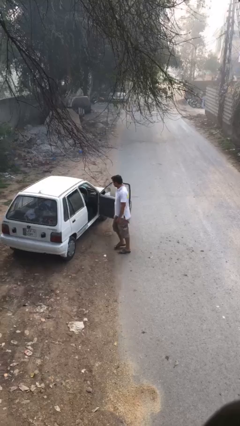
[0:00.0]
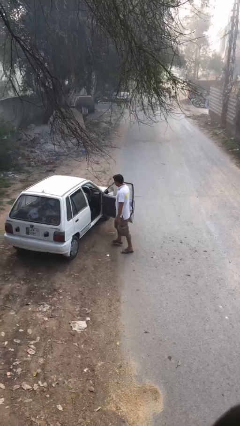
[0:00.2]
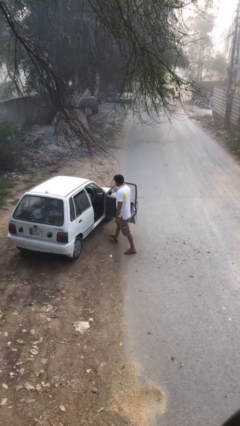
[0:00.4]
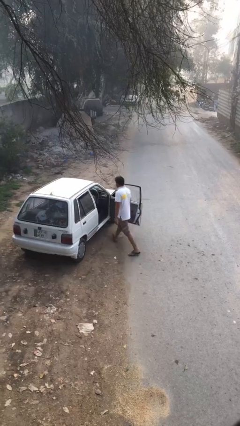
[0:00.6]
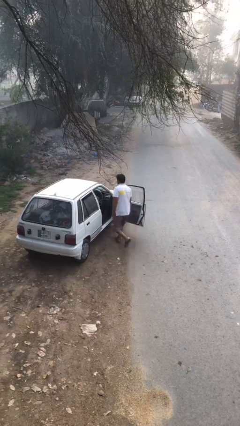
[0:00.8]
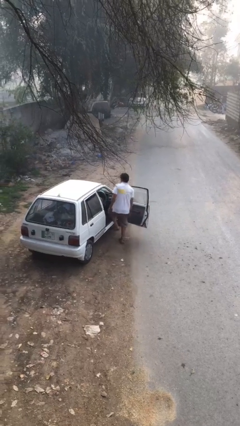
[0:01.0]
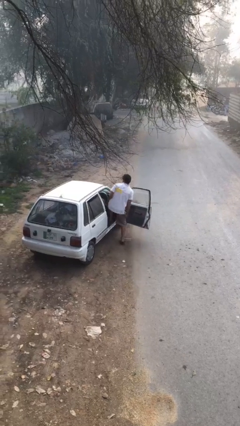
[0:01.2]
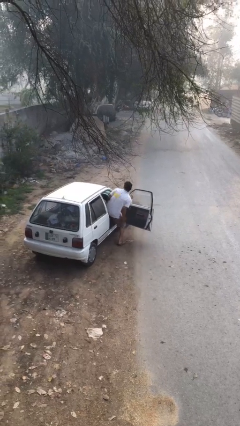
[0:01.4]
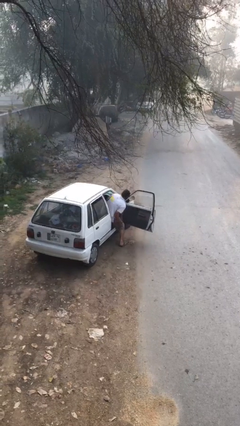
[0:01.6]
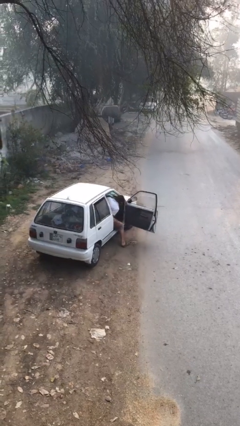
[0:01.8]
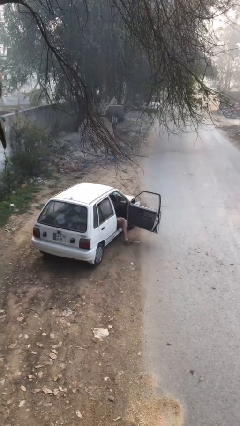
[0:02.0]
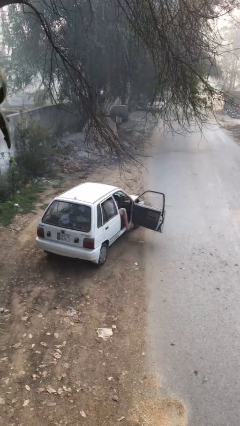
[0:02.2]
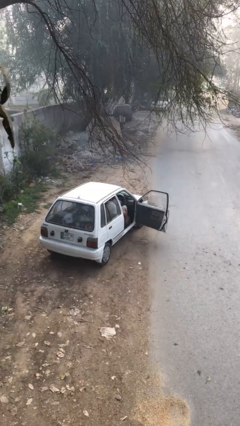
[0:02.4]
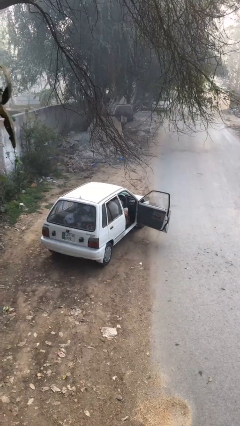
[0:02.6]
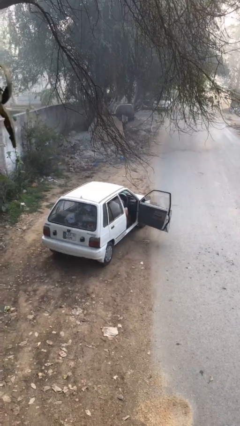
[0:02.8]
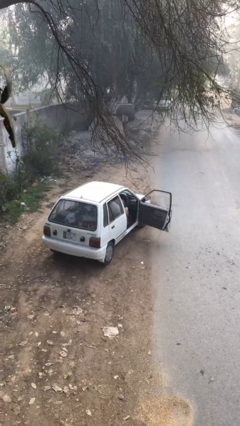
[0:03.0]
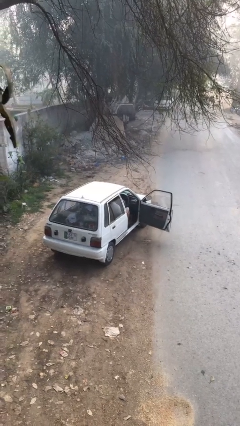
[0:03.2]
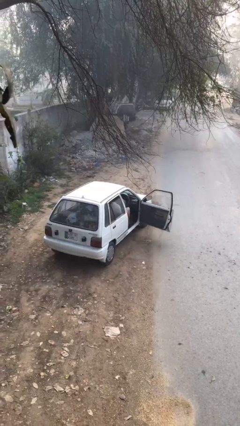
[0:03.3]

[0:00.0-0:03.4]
person enters car

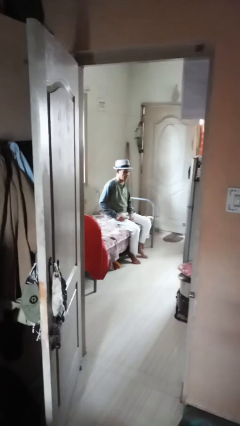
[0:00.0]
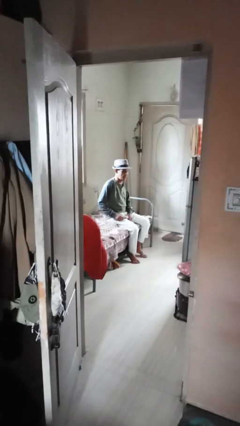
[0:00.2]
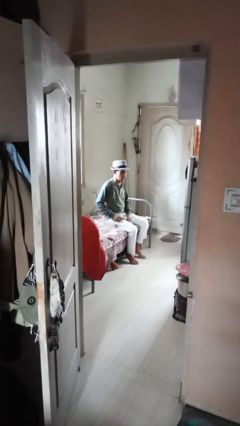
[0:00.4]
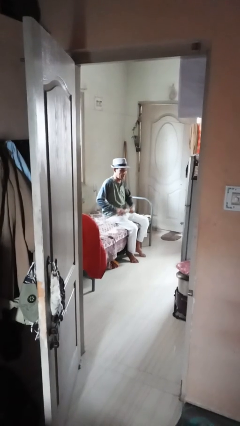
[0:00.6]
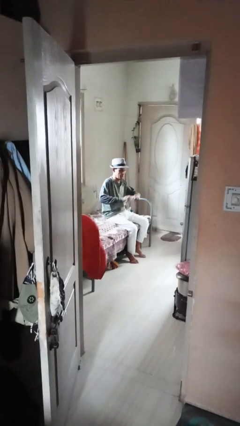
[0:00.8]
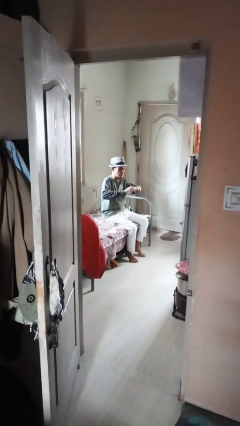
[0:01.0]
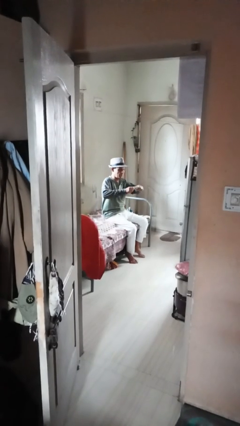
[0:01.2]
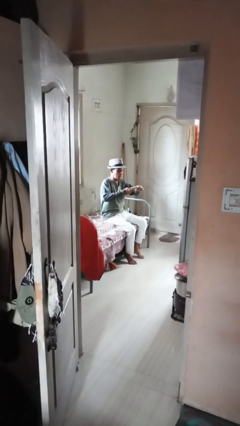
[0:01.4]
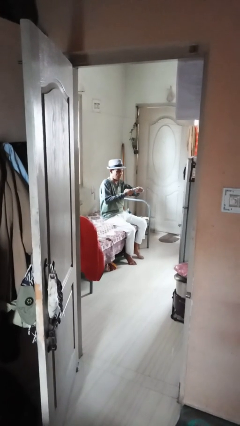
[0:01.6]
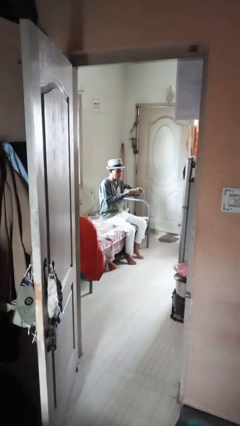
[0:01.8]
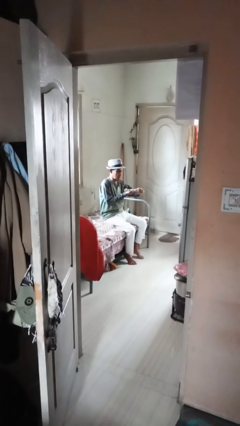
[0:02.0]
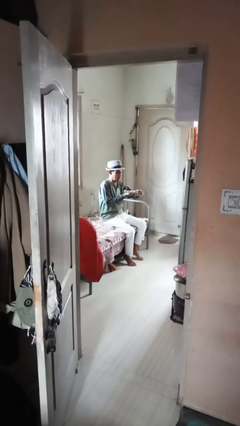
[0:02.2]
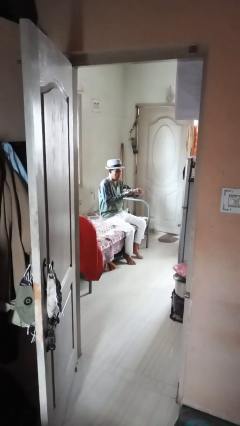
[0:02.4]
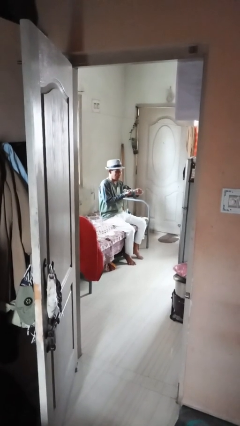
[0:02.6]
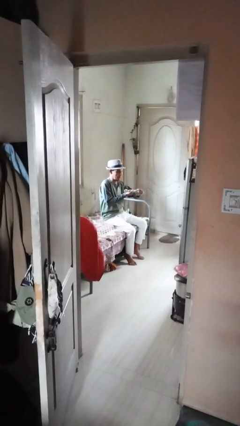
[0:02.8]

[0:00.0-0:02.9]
person squeezes object

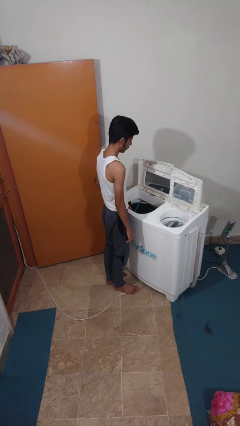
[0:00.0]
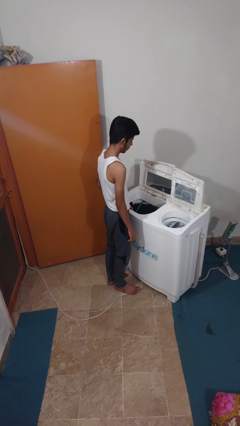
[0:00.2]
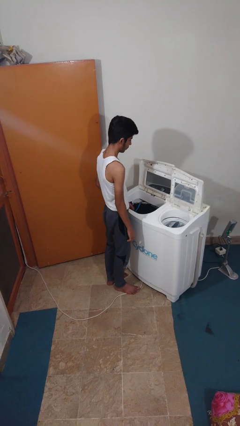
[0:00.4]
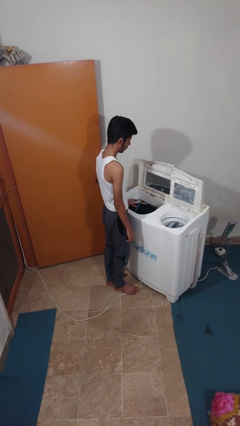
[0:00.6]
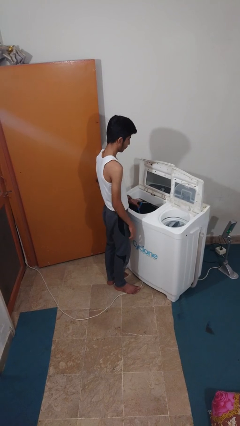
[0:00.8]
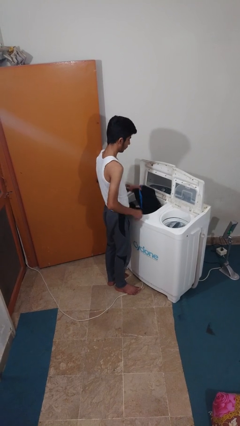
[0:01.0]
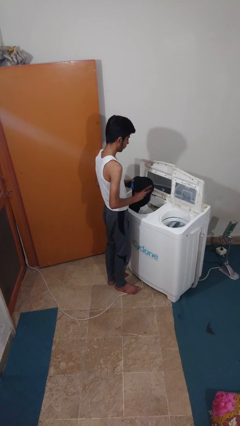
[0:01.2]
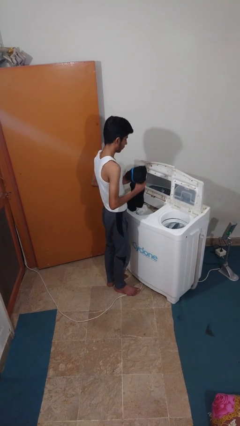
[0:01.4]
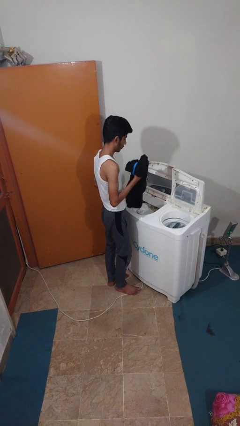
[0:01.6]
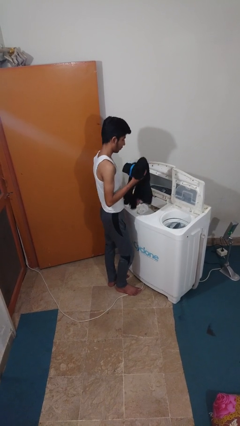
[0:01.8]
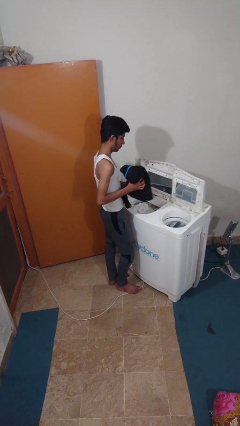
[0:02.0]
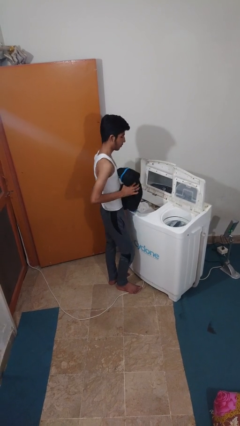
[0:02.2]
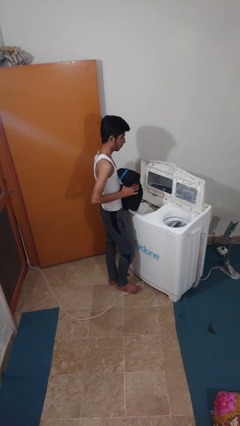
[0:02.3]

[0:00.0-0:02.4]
person unloads clotheswasher

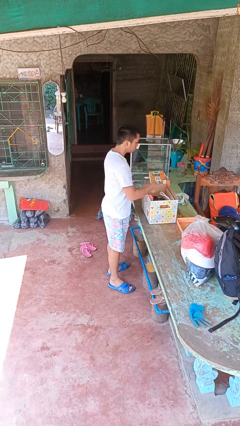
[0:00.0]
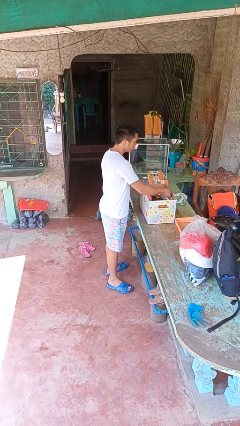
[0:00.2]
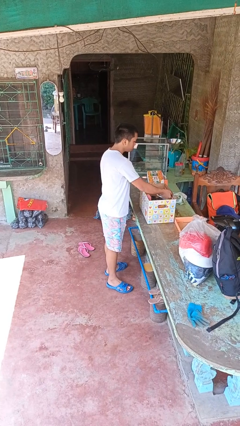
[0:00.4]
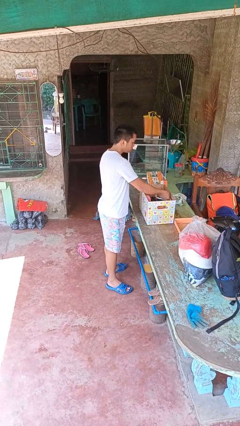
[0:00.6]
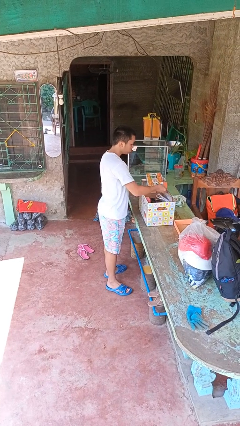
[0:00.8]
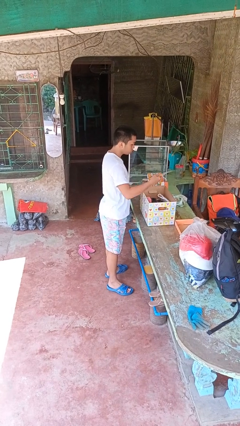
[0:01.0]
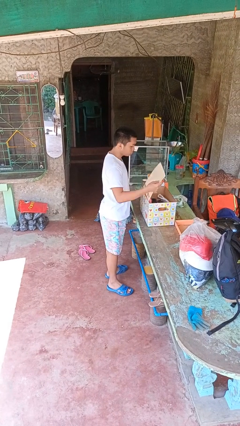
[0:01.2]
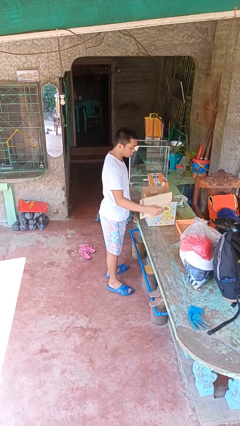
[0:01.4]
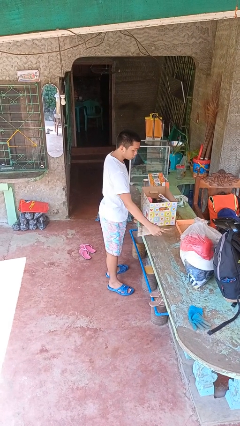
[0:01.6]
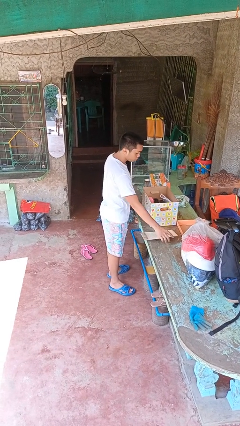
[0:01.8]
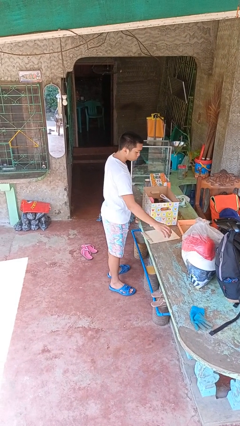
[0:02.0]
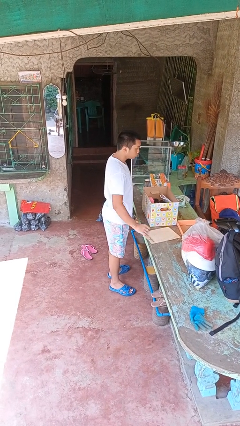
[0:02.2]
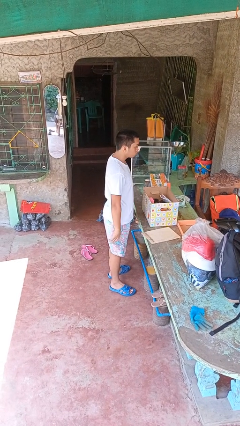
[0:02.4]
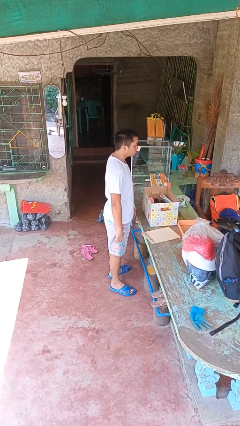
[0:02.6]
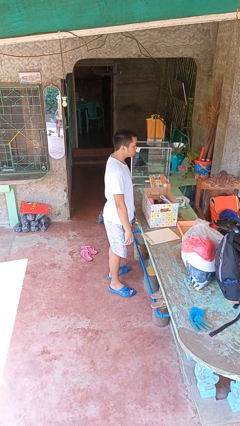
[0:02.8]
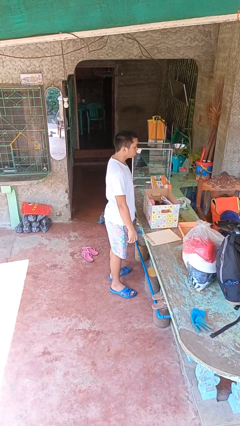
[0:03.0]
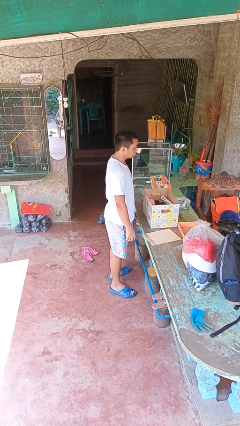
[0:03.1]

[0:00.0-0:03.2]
person takes object from box

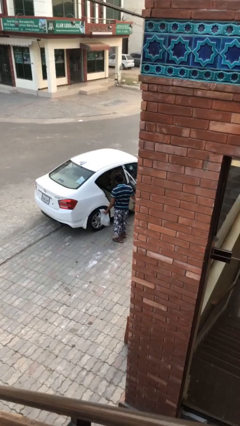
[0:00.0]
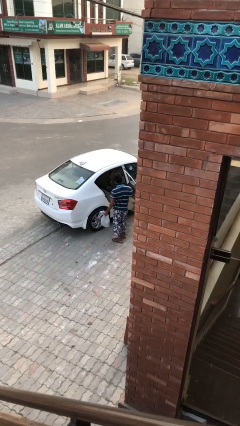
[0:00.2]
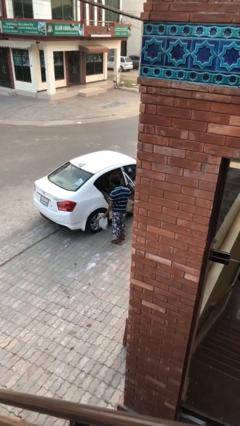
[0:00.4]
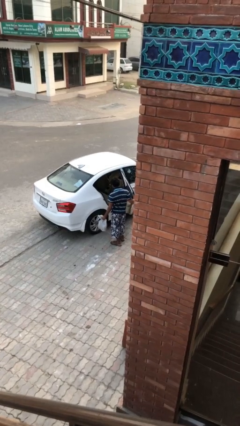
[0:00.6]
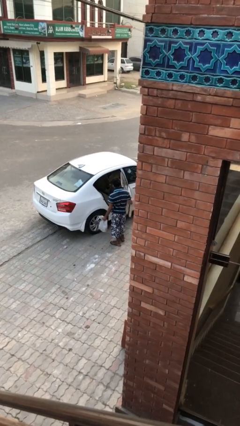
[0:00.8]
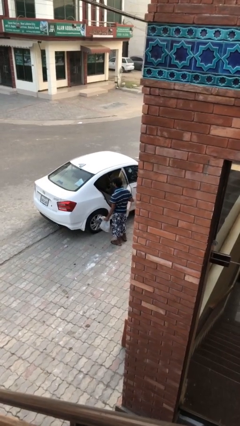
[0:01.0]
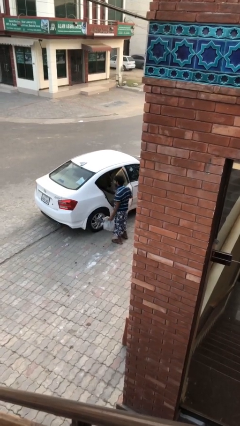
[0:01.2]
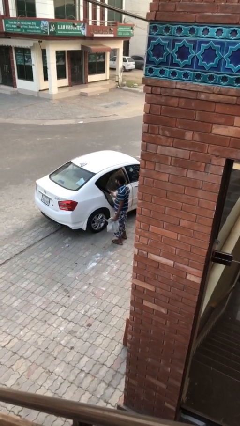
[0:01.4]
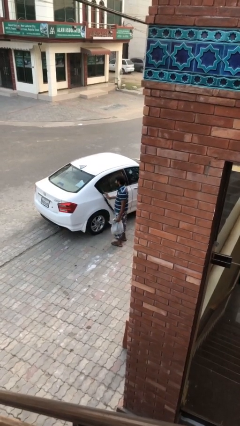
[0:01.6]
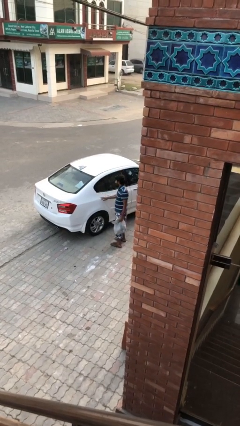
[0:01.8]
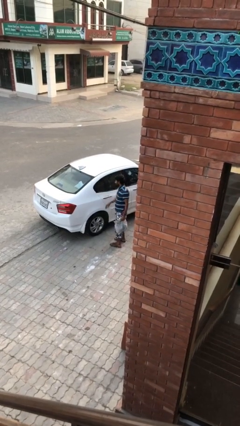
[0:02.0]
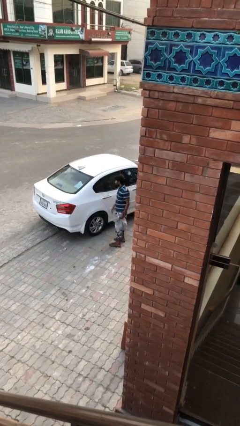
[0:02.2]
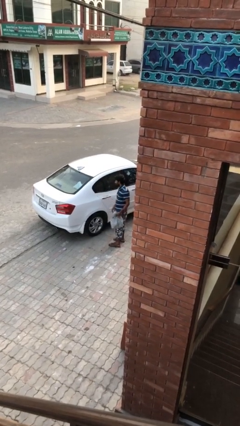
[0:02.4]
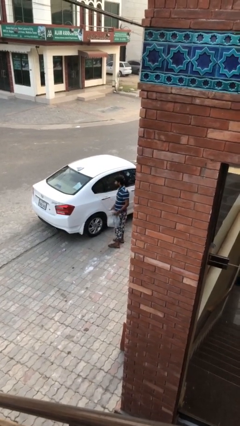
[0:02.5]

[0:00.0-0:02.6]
person closes car door

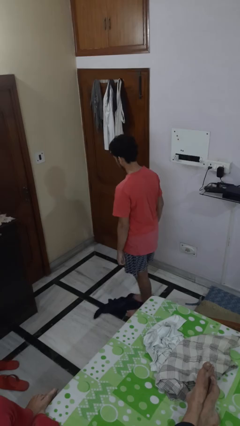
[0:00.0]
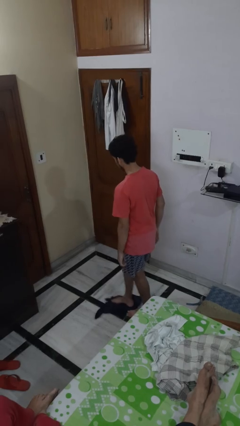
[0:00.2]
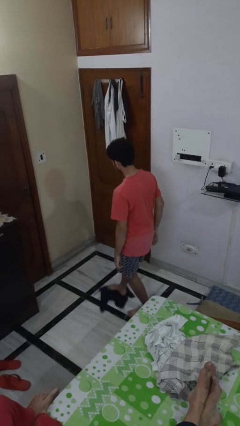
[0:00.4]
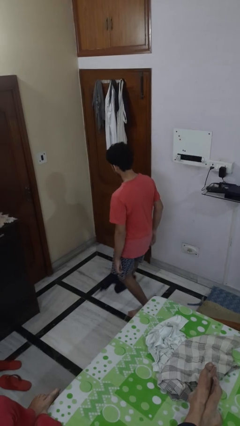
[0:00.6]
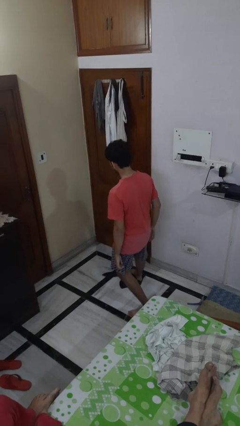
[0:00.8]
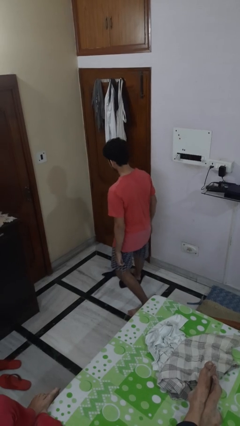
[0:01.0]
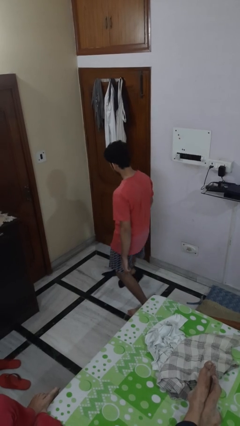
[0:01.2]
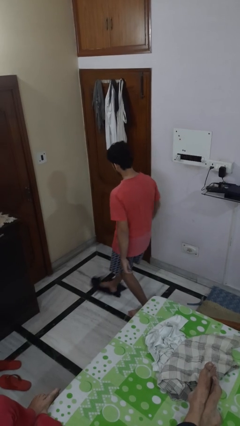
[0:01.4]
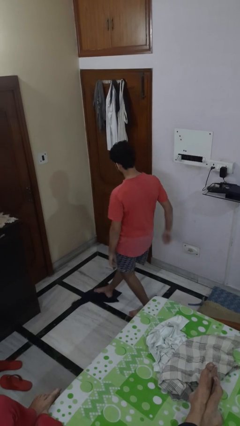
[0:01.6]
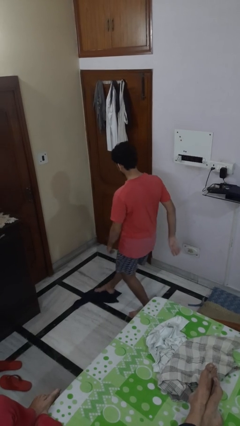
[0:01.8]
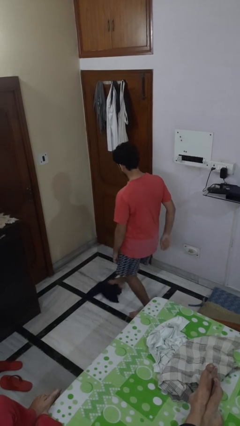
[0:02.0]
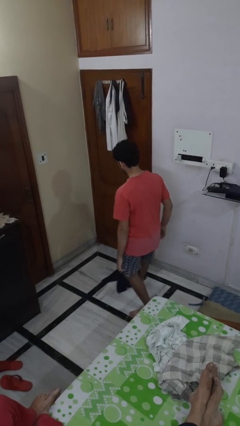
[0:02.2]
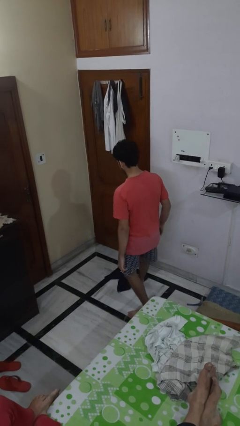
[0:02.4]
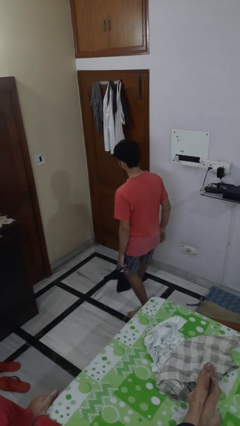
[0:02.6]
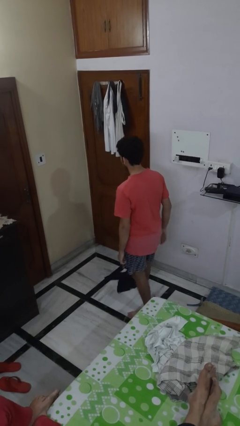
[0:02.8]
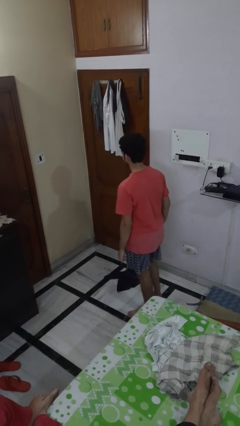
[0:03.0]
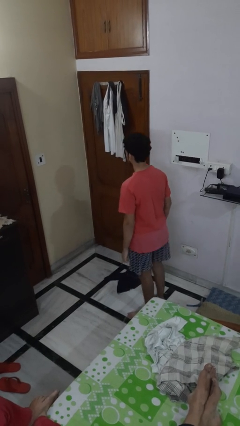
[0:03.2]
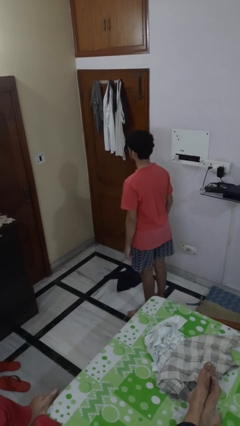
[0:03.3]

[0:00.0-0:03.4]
person mops
